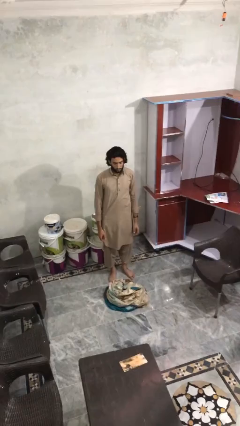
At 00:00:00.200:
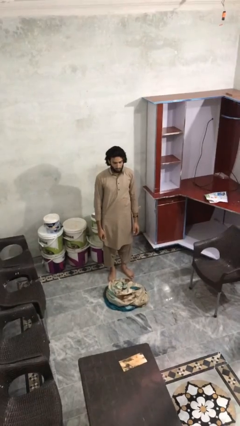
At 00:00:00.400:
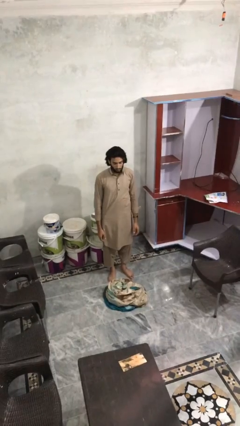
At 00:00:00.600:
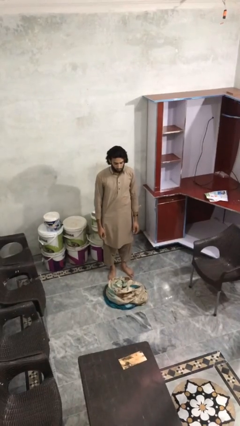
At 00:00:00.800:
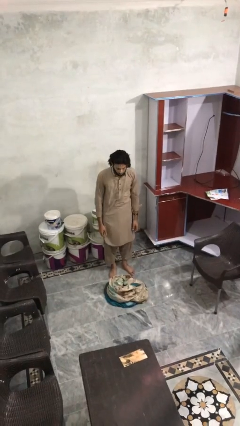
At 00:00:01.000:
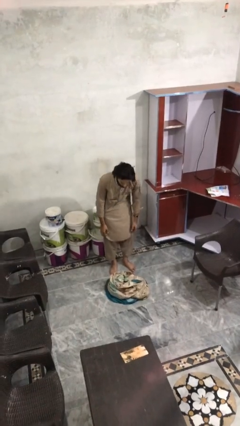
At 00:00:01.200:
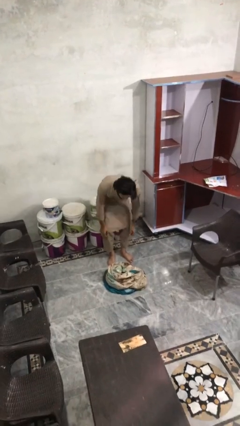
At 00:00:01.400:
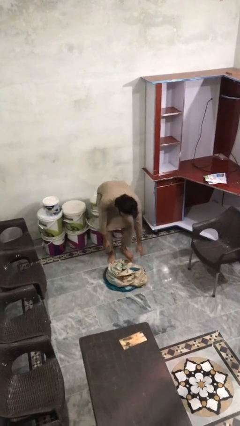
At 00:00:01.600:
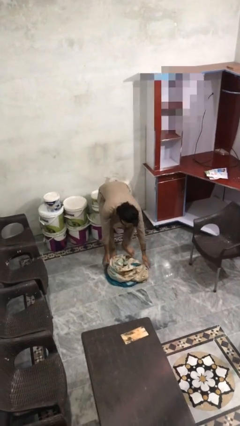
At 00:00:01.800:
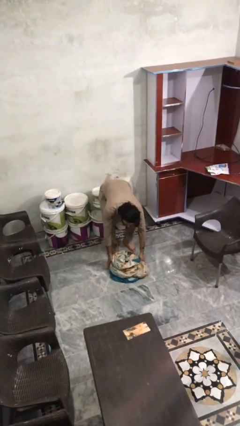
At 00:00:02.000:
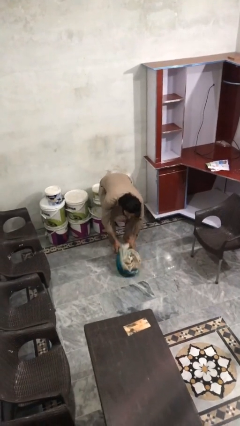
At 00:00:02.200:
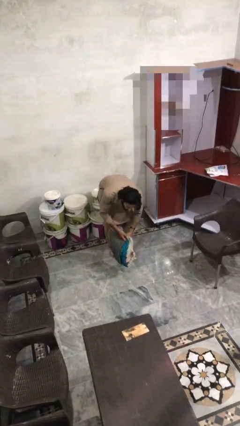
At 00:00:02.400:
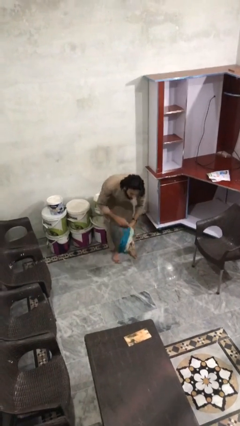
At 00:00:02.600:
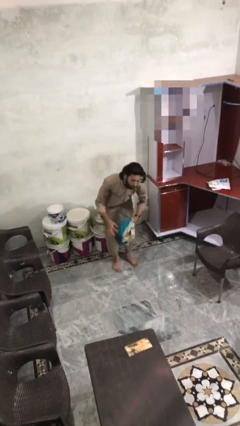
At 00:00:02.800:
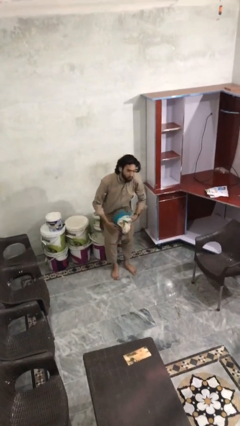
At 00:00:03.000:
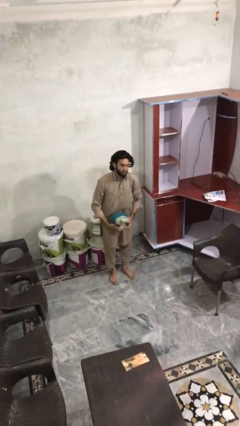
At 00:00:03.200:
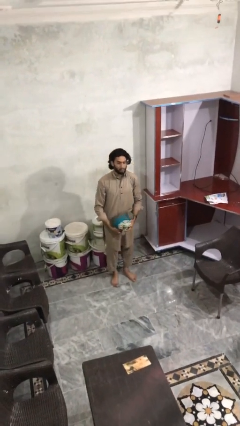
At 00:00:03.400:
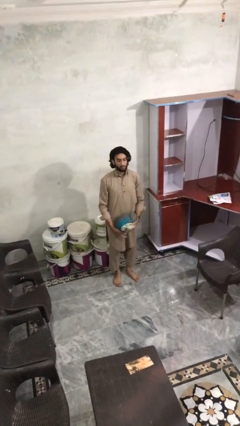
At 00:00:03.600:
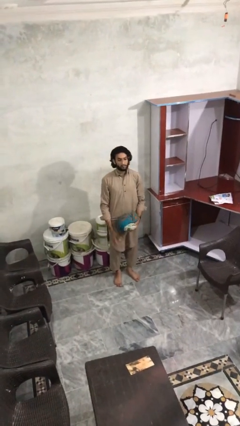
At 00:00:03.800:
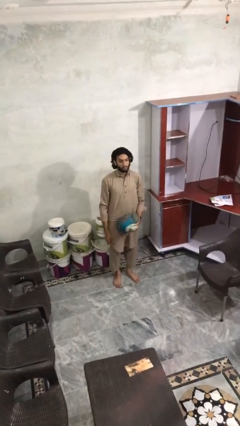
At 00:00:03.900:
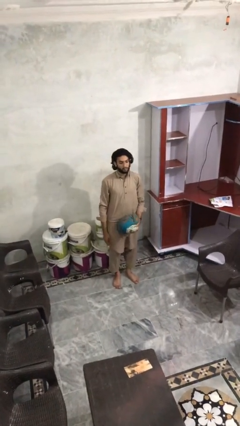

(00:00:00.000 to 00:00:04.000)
person picks up object from floor

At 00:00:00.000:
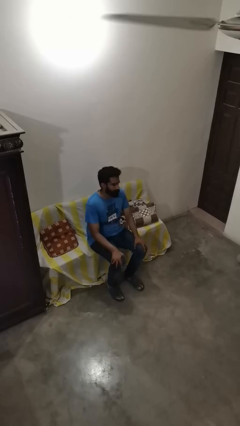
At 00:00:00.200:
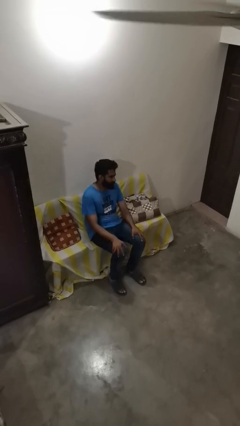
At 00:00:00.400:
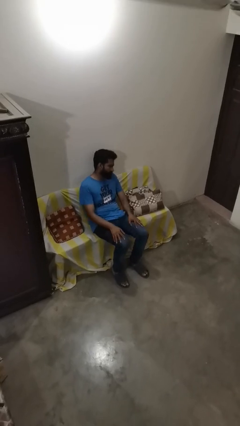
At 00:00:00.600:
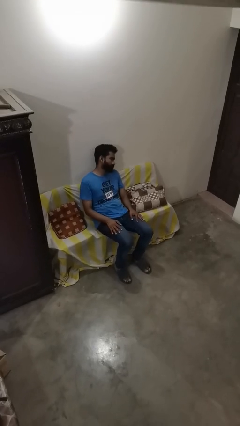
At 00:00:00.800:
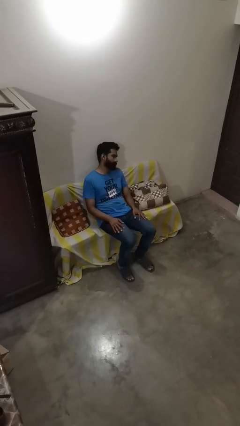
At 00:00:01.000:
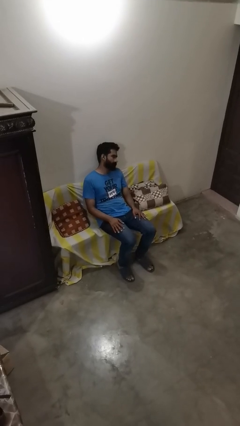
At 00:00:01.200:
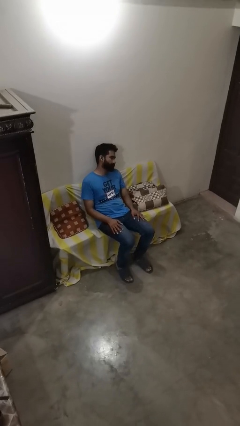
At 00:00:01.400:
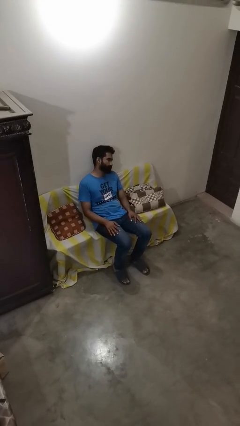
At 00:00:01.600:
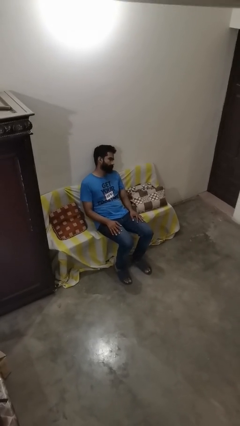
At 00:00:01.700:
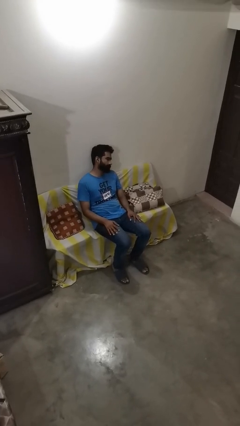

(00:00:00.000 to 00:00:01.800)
person lies down on couch

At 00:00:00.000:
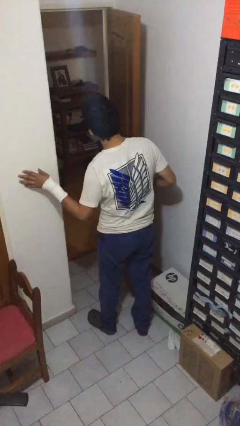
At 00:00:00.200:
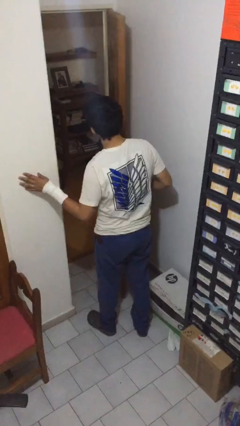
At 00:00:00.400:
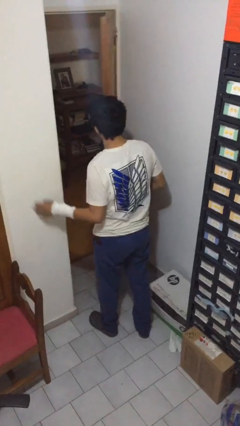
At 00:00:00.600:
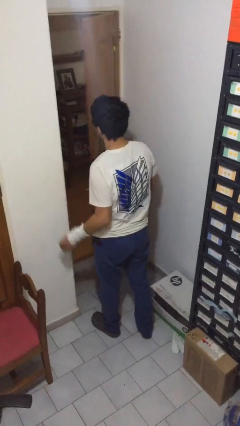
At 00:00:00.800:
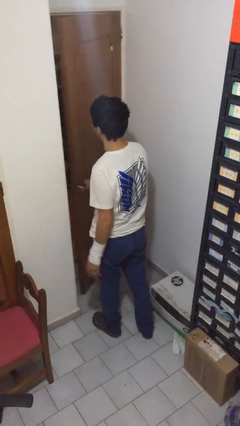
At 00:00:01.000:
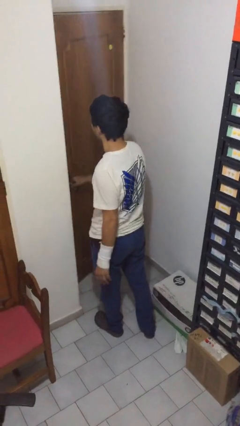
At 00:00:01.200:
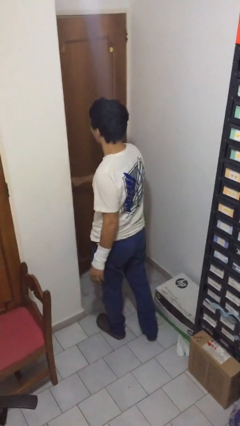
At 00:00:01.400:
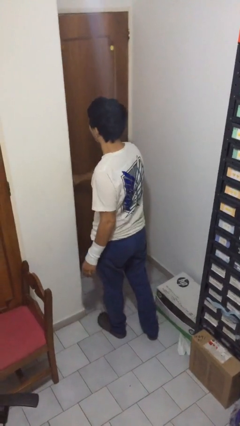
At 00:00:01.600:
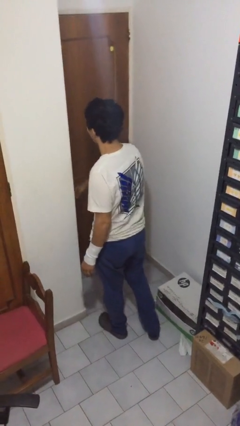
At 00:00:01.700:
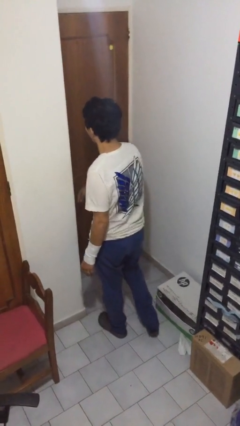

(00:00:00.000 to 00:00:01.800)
person closes facility door

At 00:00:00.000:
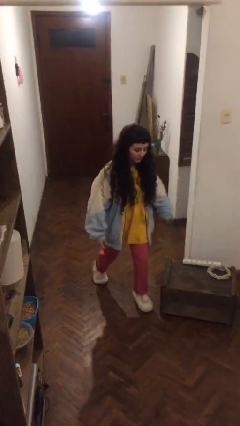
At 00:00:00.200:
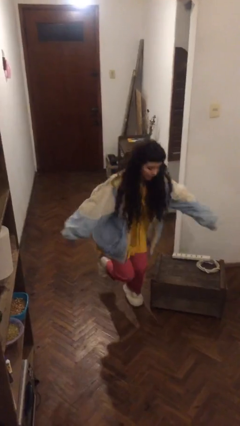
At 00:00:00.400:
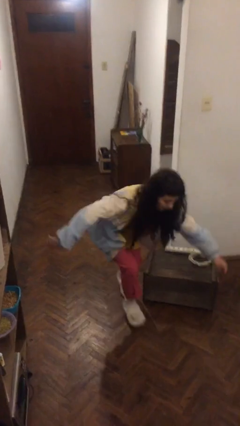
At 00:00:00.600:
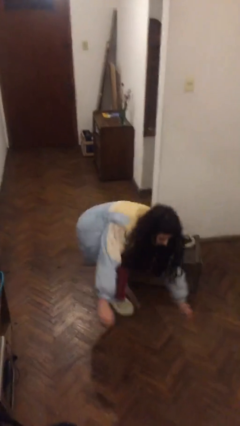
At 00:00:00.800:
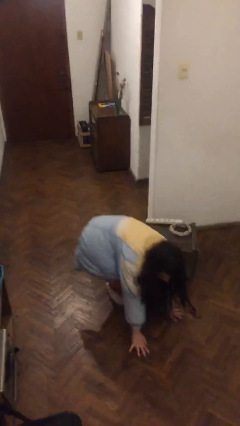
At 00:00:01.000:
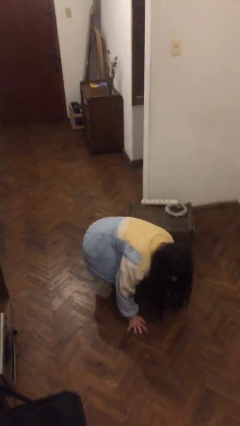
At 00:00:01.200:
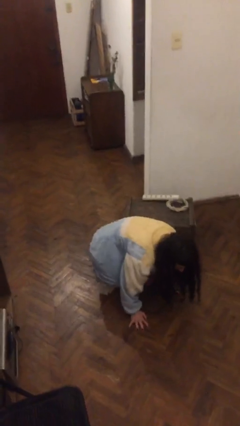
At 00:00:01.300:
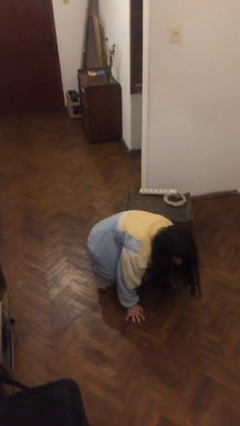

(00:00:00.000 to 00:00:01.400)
person trips on object on floor

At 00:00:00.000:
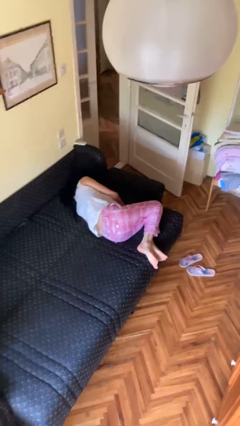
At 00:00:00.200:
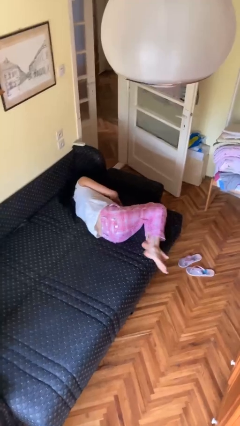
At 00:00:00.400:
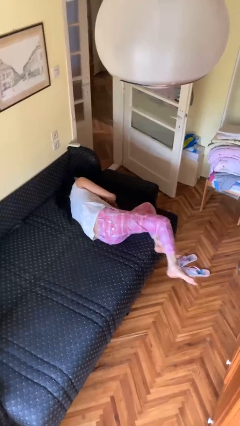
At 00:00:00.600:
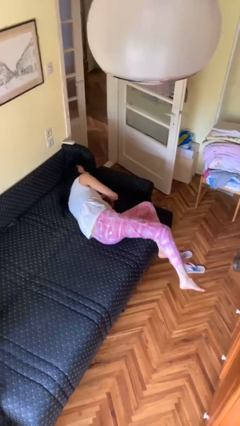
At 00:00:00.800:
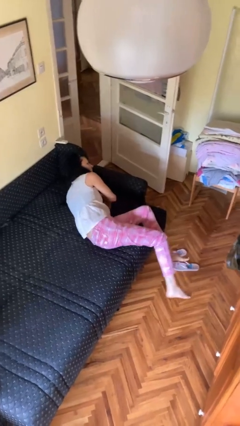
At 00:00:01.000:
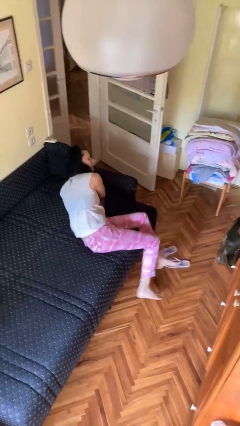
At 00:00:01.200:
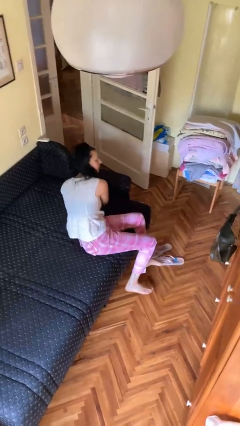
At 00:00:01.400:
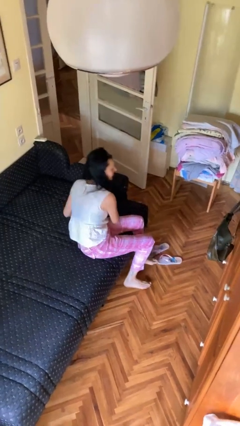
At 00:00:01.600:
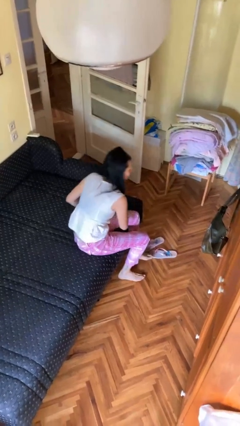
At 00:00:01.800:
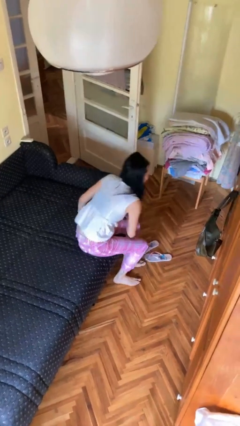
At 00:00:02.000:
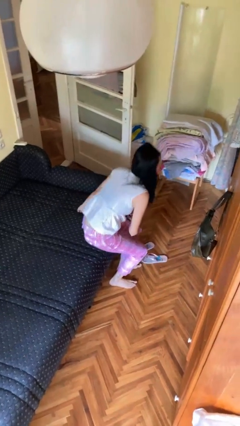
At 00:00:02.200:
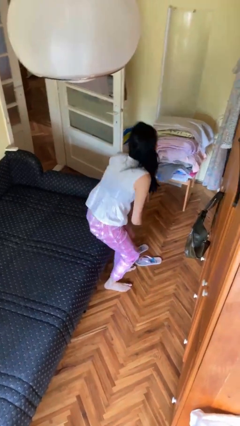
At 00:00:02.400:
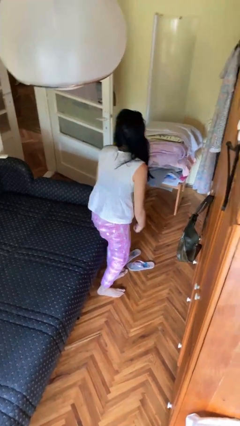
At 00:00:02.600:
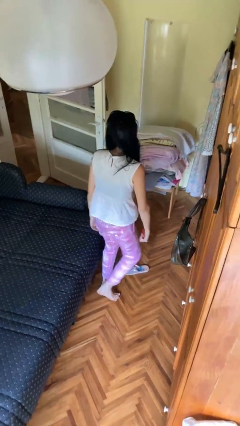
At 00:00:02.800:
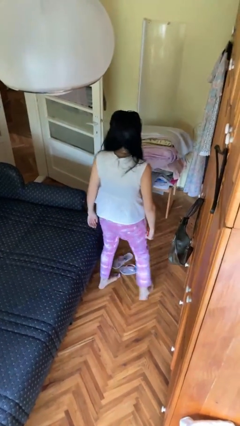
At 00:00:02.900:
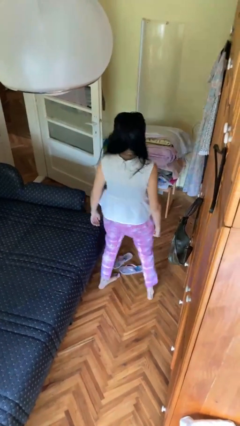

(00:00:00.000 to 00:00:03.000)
person stands up

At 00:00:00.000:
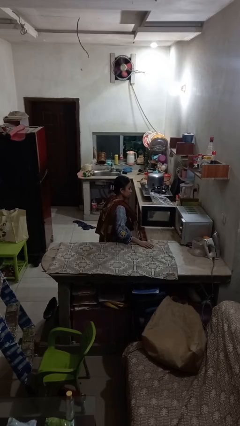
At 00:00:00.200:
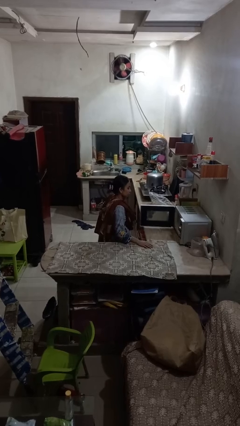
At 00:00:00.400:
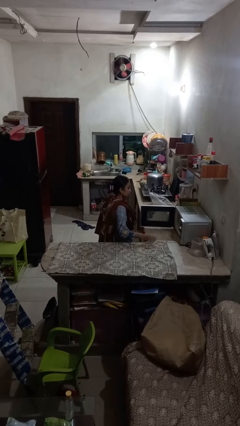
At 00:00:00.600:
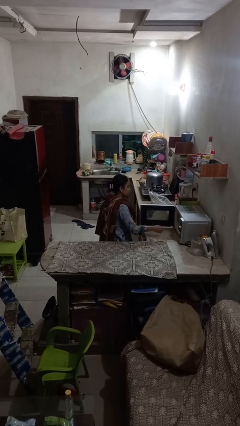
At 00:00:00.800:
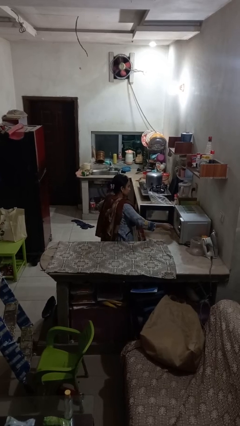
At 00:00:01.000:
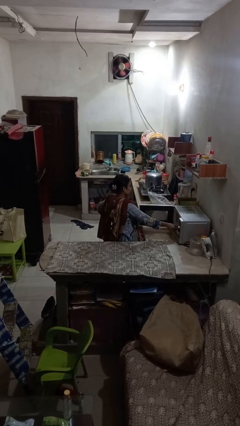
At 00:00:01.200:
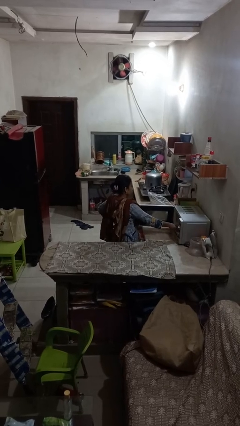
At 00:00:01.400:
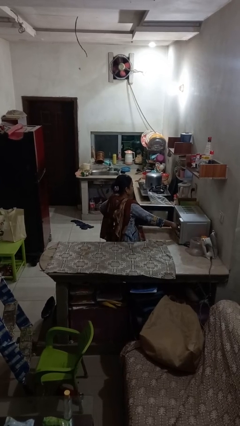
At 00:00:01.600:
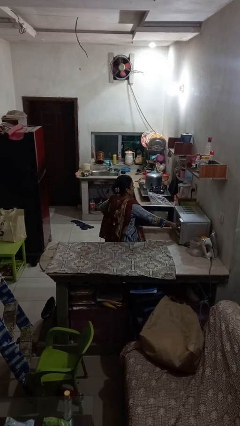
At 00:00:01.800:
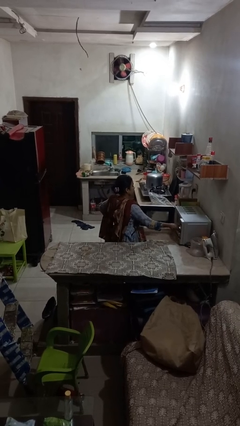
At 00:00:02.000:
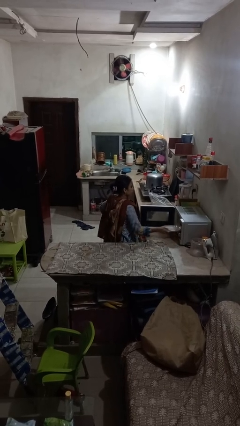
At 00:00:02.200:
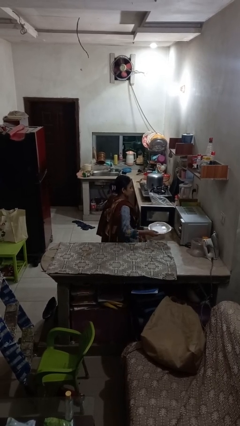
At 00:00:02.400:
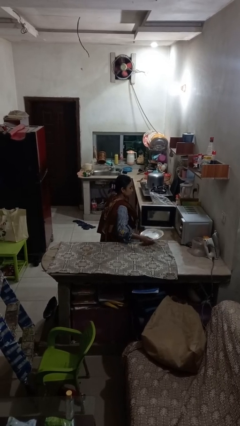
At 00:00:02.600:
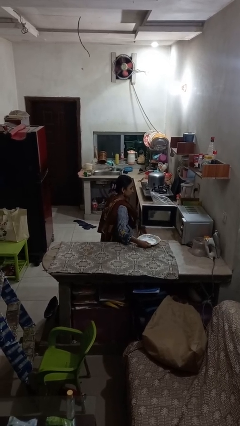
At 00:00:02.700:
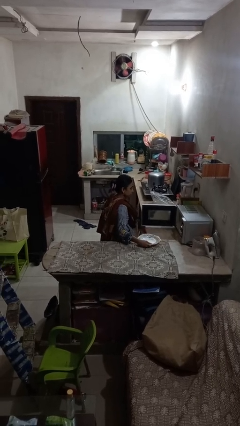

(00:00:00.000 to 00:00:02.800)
person takes object from microwave

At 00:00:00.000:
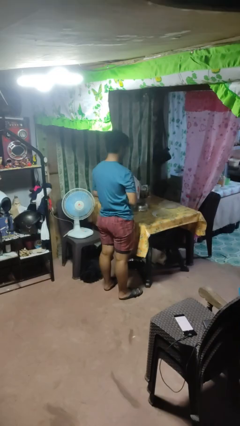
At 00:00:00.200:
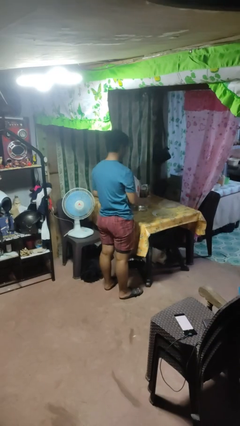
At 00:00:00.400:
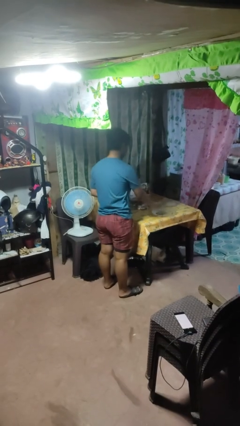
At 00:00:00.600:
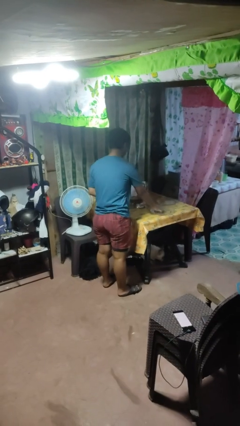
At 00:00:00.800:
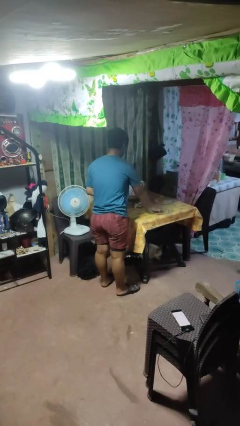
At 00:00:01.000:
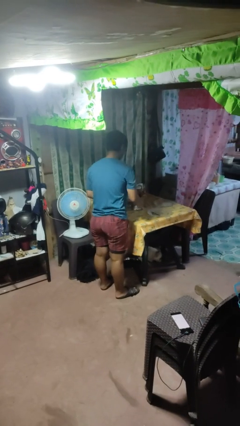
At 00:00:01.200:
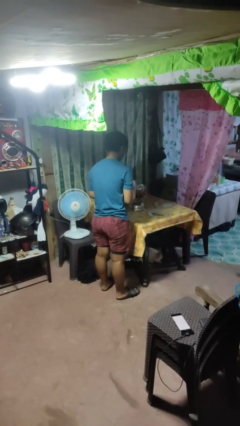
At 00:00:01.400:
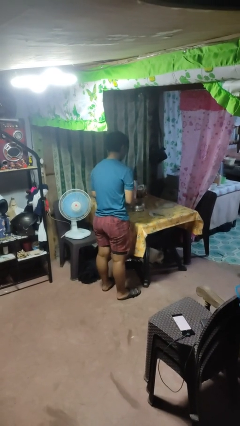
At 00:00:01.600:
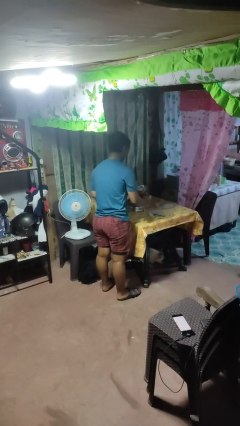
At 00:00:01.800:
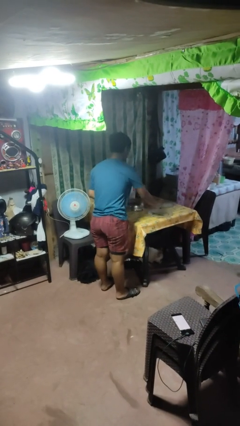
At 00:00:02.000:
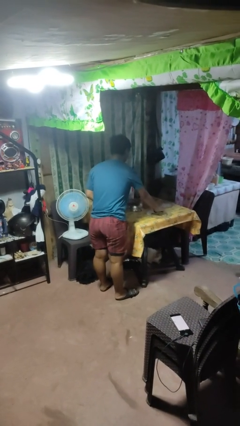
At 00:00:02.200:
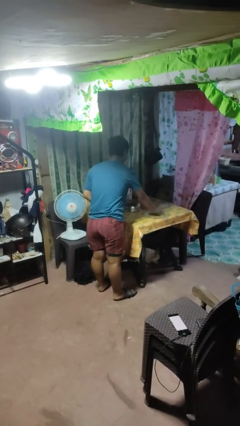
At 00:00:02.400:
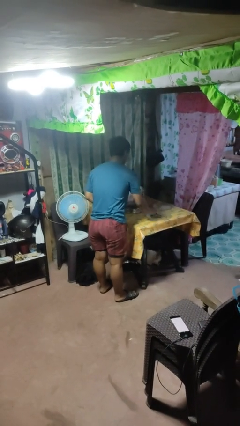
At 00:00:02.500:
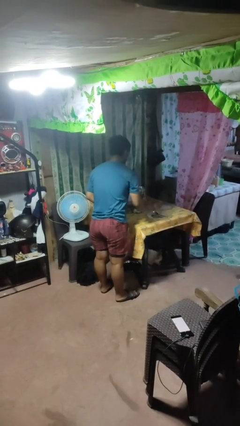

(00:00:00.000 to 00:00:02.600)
person sets table
